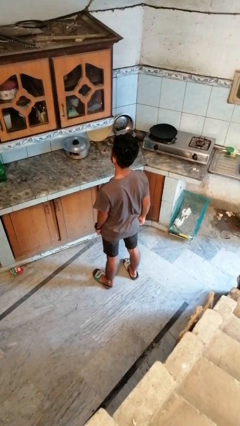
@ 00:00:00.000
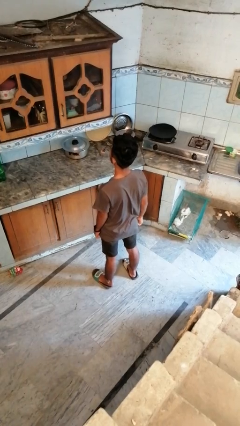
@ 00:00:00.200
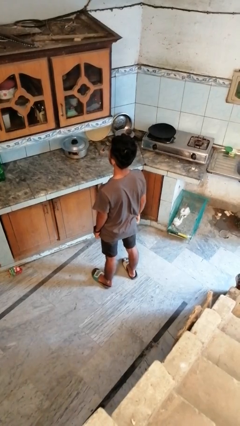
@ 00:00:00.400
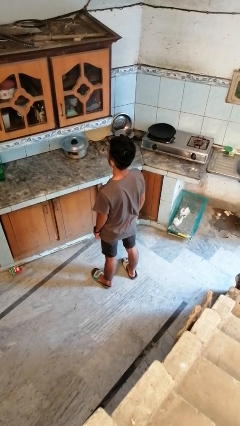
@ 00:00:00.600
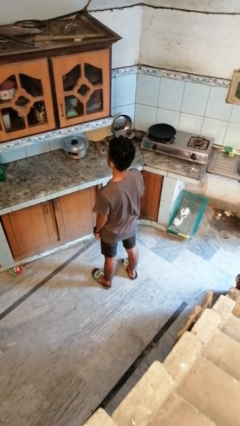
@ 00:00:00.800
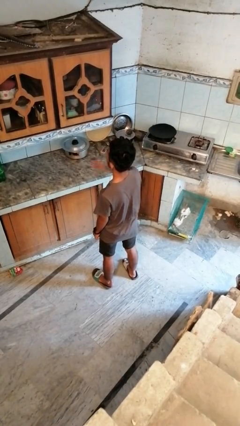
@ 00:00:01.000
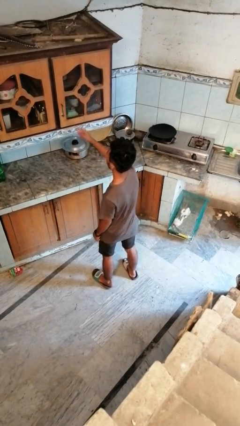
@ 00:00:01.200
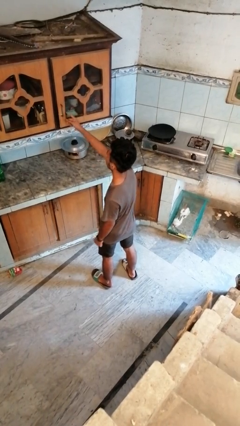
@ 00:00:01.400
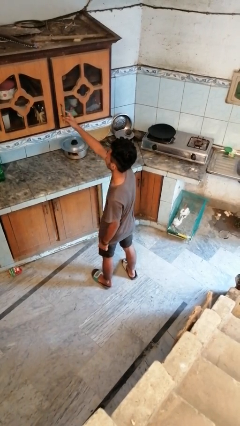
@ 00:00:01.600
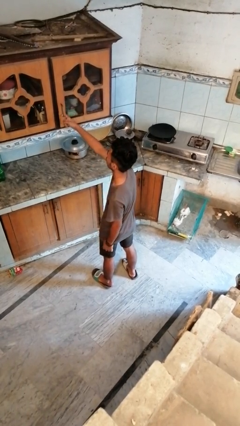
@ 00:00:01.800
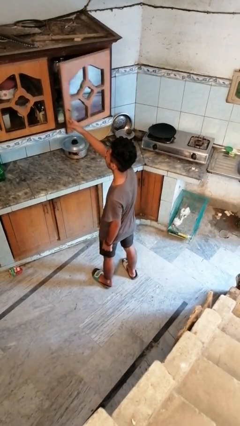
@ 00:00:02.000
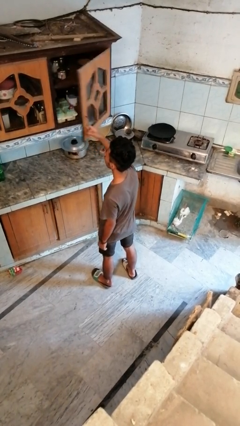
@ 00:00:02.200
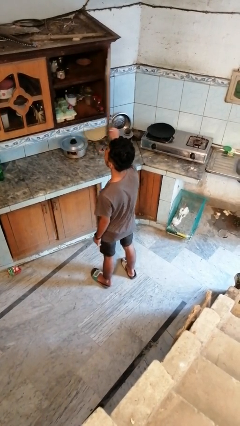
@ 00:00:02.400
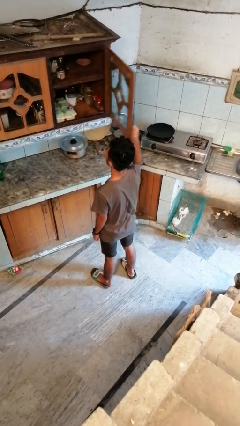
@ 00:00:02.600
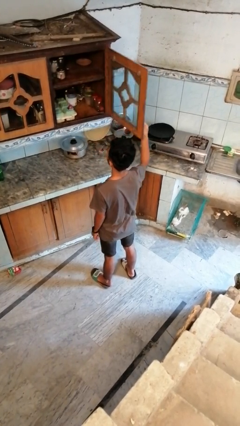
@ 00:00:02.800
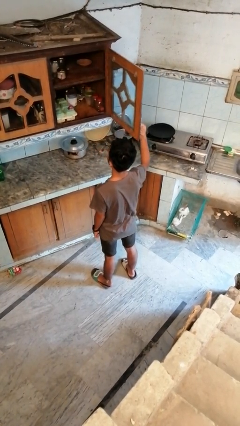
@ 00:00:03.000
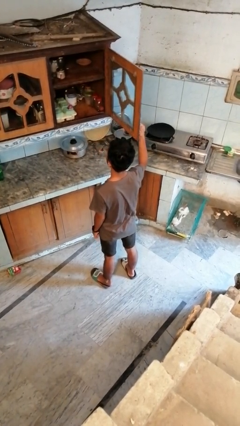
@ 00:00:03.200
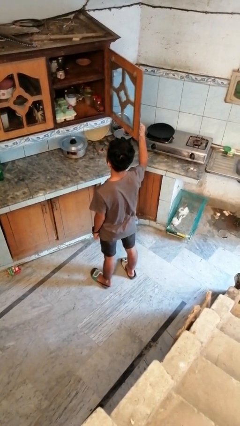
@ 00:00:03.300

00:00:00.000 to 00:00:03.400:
person opens cabinet

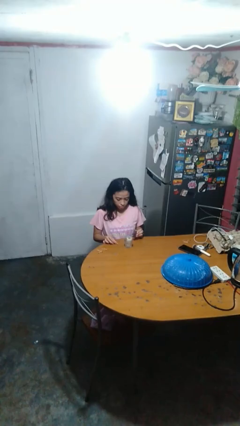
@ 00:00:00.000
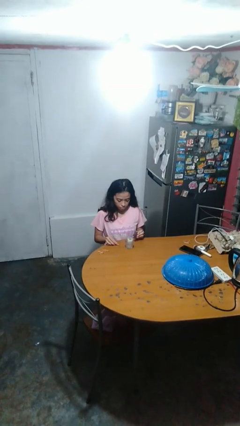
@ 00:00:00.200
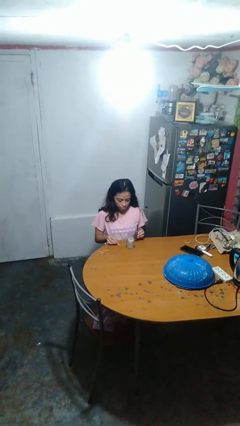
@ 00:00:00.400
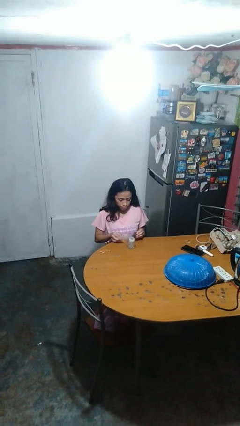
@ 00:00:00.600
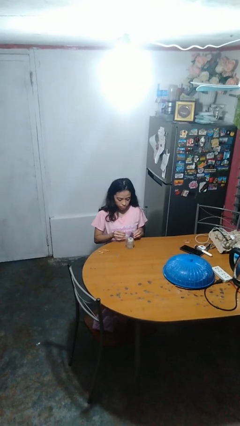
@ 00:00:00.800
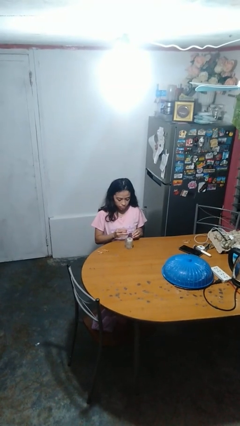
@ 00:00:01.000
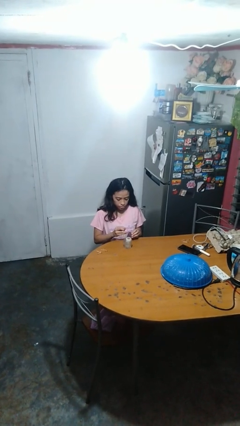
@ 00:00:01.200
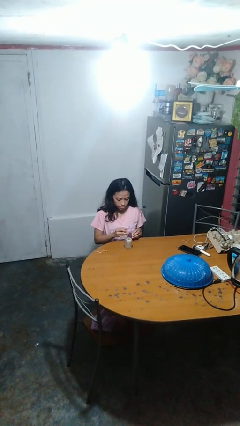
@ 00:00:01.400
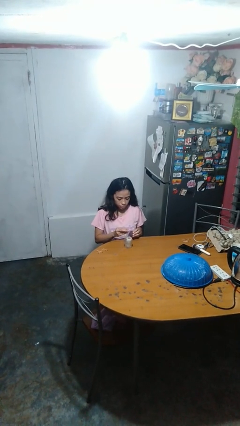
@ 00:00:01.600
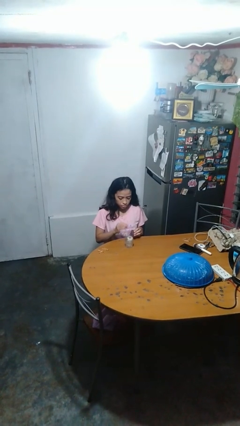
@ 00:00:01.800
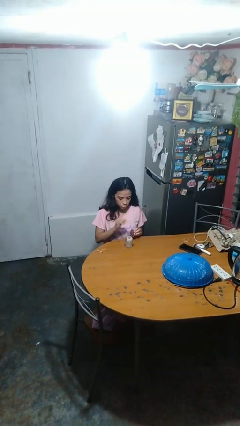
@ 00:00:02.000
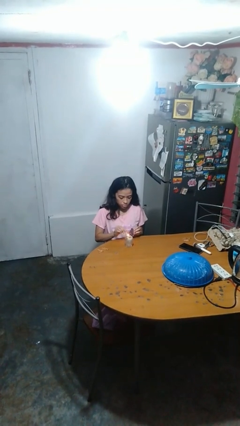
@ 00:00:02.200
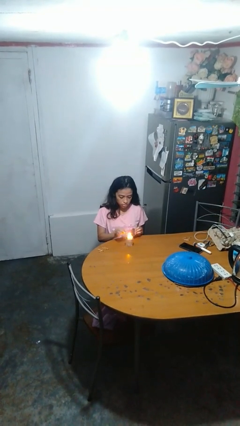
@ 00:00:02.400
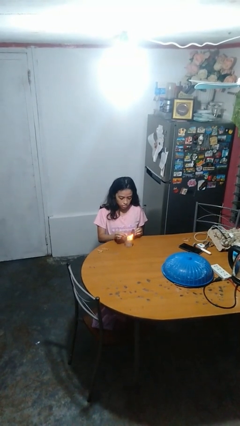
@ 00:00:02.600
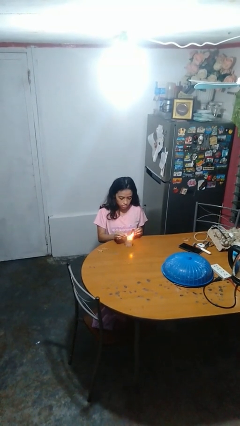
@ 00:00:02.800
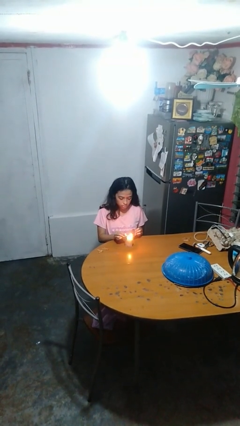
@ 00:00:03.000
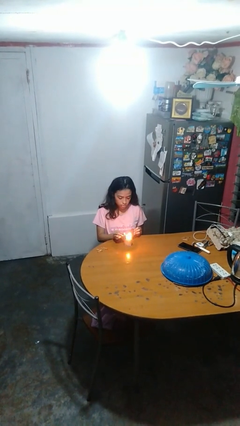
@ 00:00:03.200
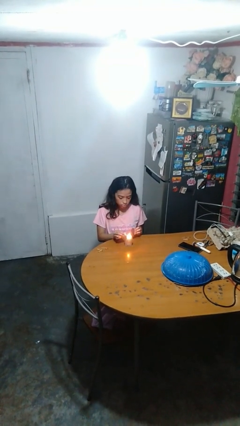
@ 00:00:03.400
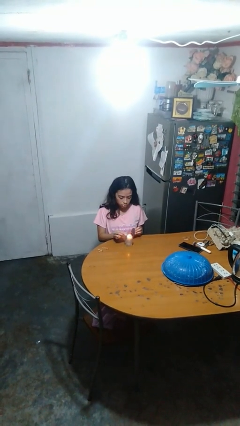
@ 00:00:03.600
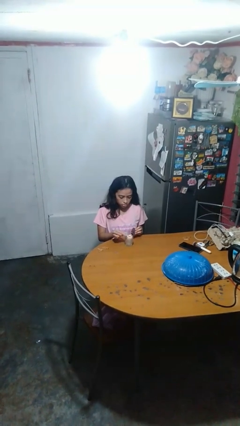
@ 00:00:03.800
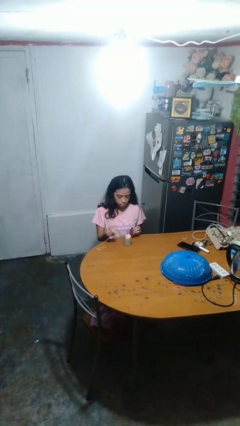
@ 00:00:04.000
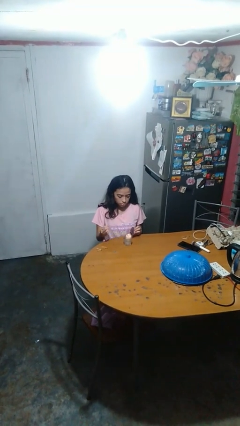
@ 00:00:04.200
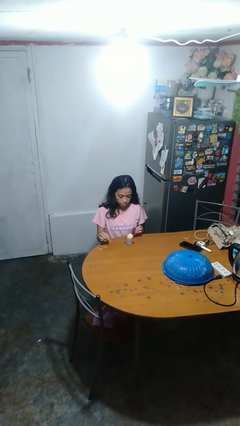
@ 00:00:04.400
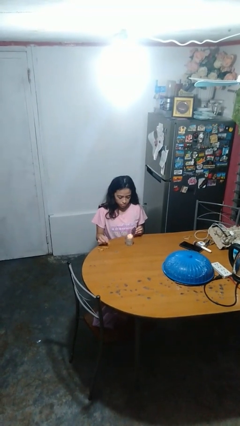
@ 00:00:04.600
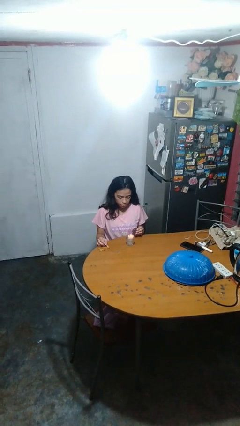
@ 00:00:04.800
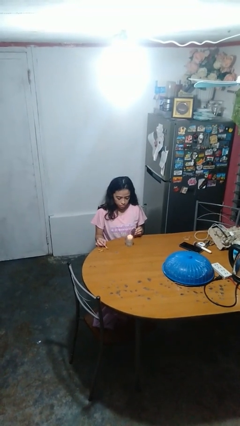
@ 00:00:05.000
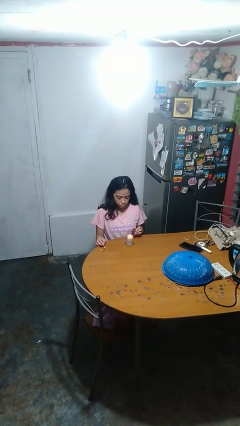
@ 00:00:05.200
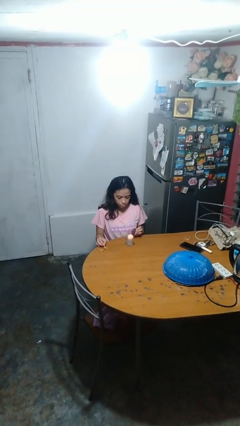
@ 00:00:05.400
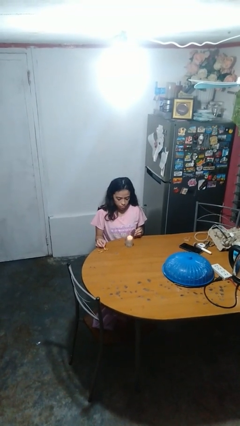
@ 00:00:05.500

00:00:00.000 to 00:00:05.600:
person lights candle

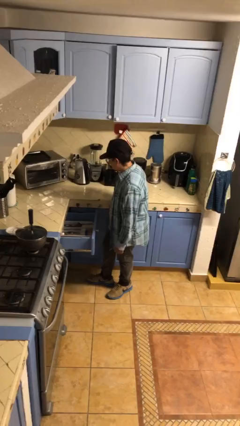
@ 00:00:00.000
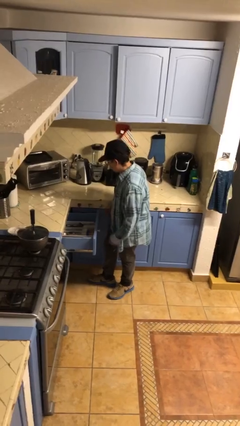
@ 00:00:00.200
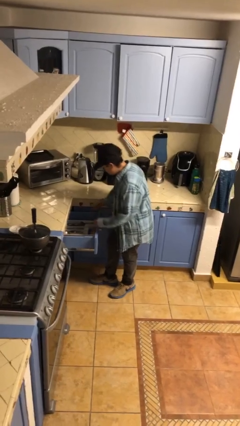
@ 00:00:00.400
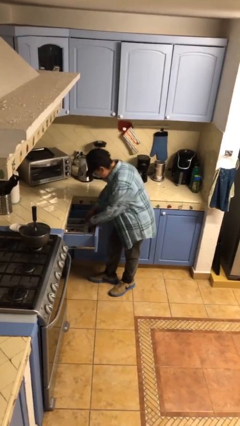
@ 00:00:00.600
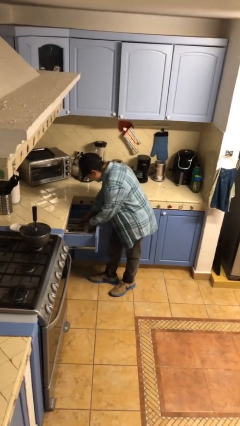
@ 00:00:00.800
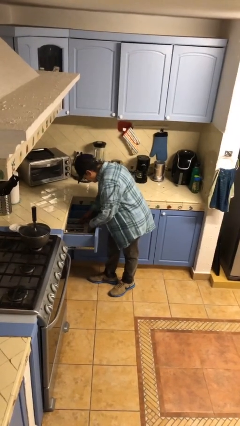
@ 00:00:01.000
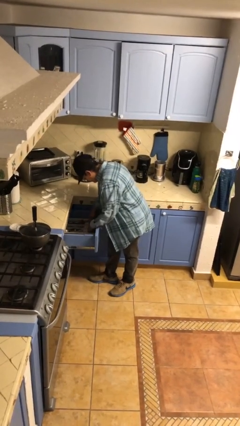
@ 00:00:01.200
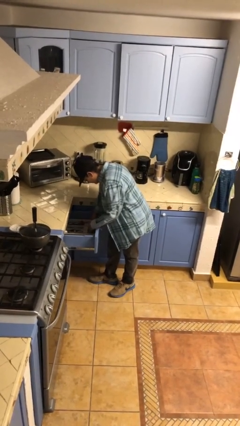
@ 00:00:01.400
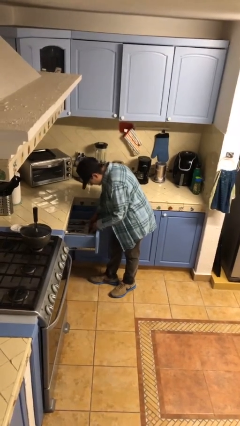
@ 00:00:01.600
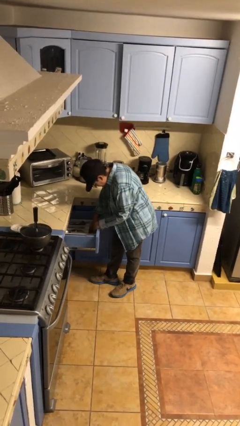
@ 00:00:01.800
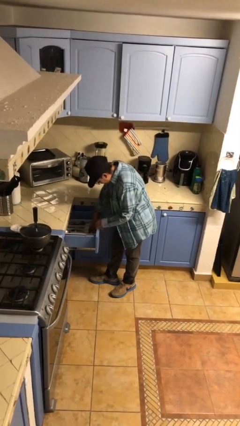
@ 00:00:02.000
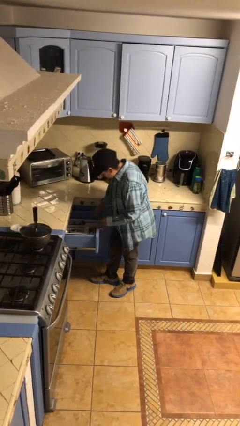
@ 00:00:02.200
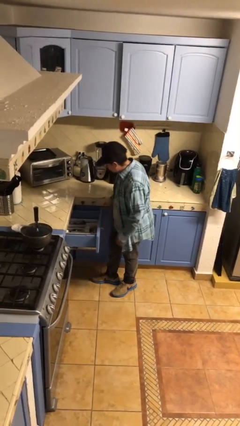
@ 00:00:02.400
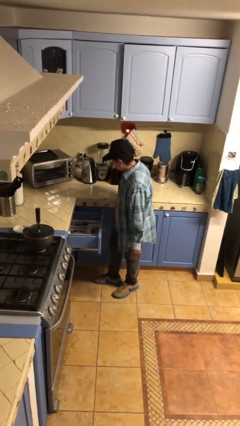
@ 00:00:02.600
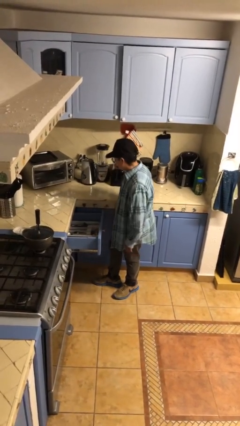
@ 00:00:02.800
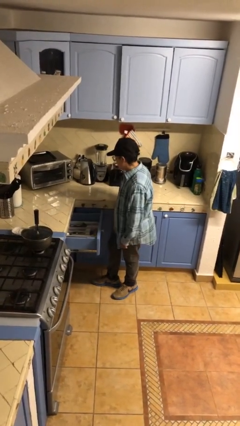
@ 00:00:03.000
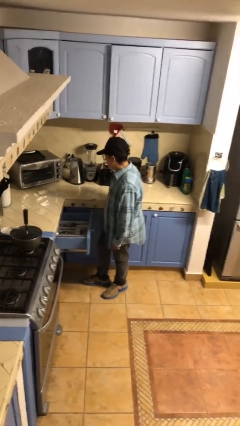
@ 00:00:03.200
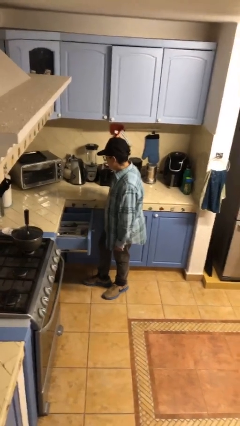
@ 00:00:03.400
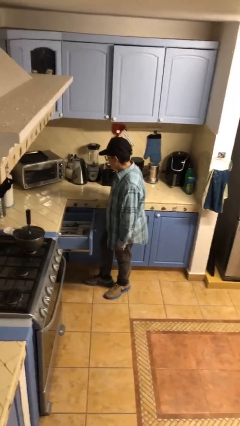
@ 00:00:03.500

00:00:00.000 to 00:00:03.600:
person searches in kitchen drawer

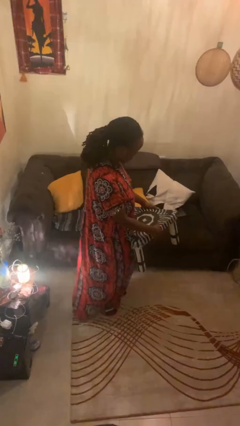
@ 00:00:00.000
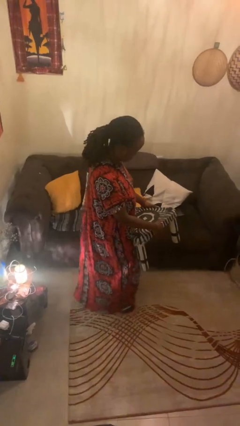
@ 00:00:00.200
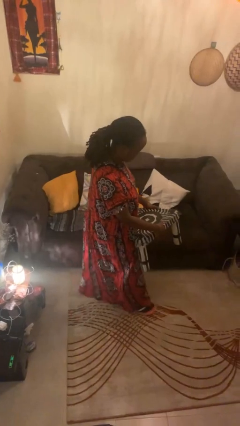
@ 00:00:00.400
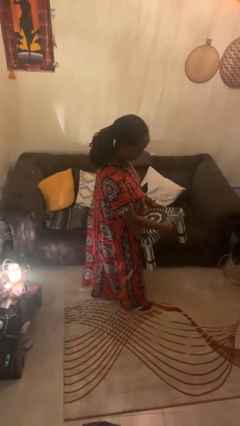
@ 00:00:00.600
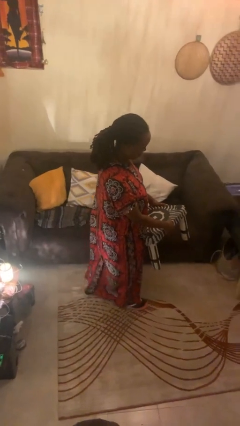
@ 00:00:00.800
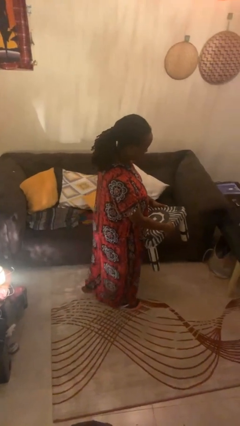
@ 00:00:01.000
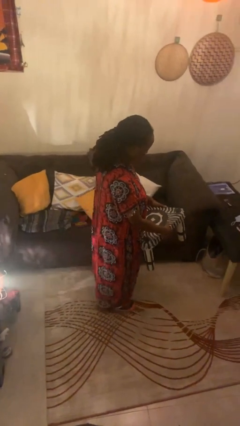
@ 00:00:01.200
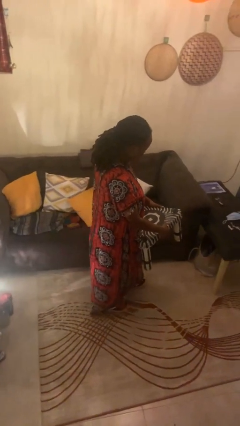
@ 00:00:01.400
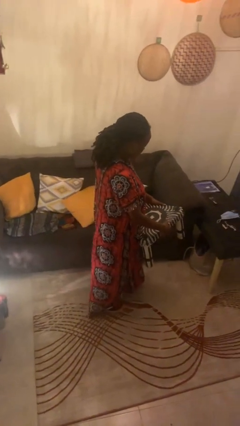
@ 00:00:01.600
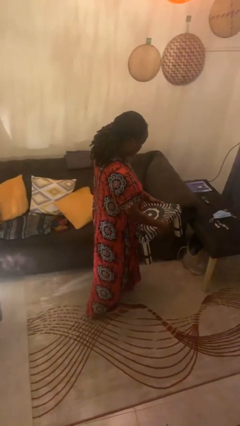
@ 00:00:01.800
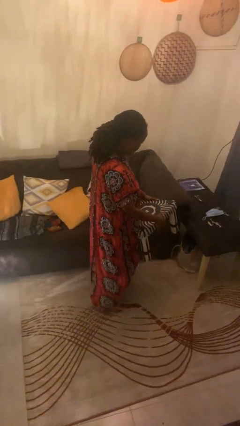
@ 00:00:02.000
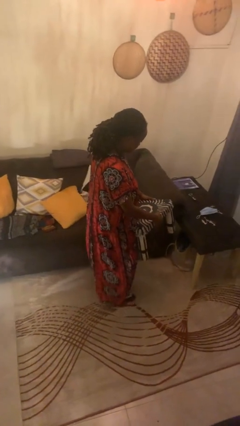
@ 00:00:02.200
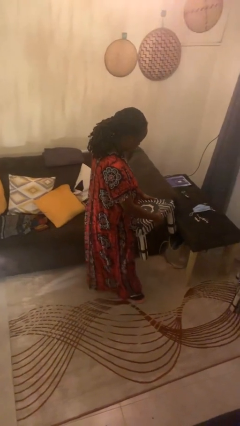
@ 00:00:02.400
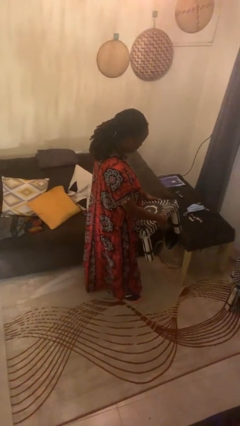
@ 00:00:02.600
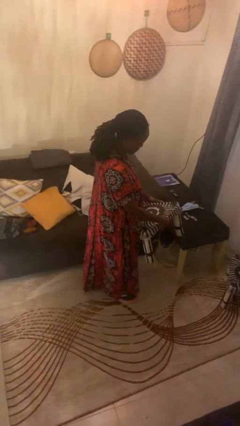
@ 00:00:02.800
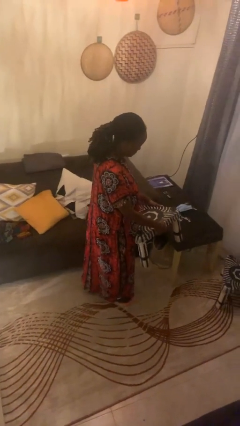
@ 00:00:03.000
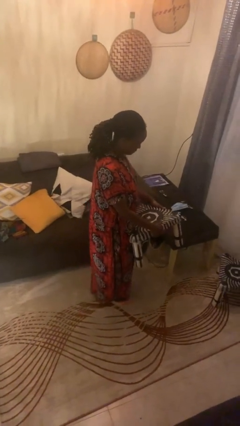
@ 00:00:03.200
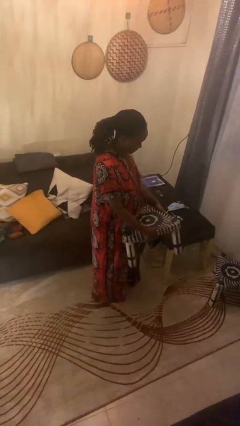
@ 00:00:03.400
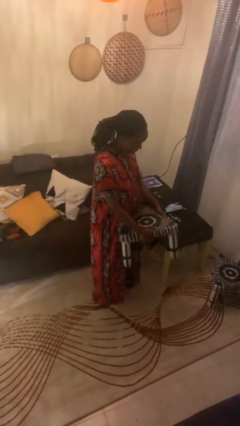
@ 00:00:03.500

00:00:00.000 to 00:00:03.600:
person carries furniture

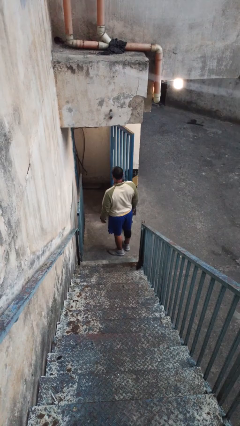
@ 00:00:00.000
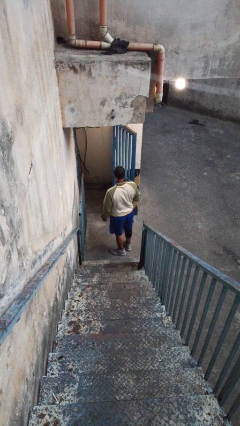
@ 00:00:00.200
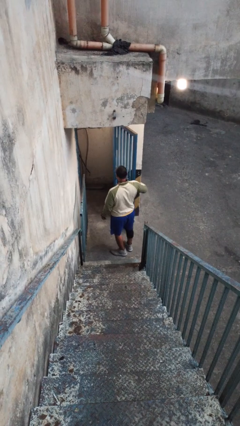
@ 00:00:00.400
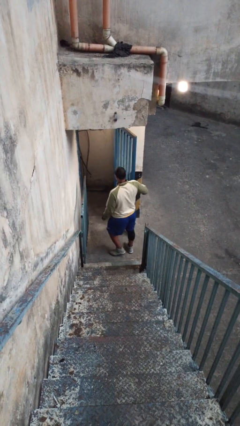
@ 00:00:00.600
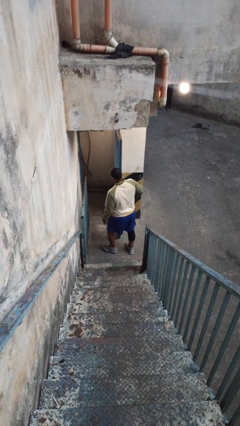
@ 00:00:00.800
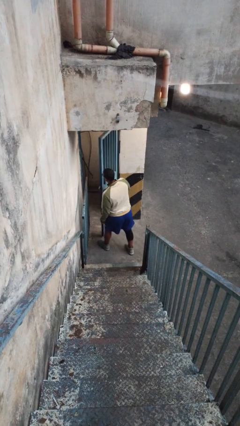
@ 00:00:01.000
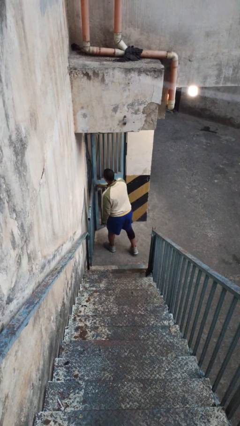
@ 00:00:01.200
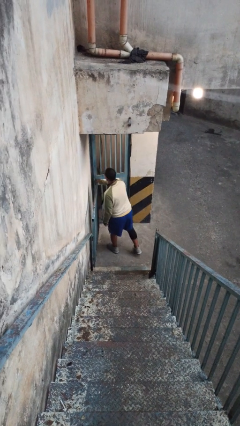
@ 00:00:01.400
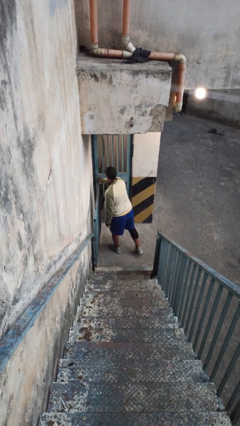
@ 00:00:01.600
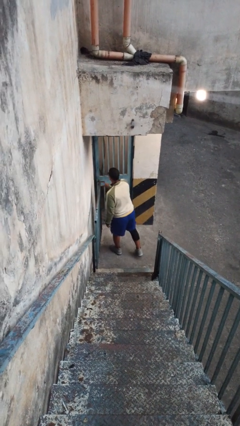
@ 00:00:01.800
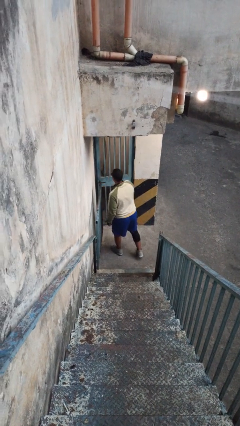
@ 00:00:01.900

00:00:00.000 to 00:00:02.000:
person closes facility door
